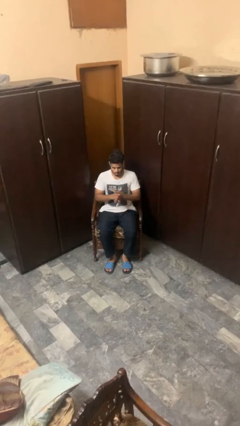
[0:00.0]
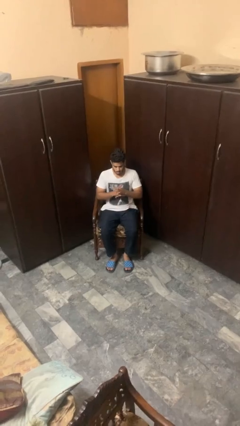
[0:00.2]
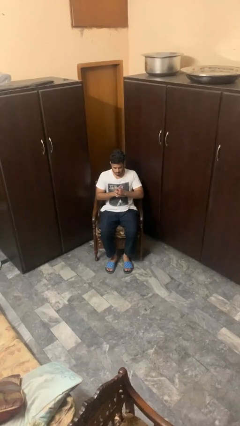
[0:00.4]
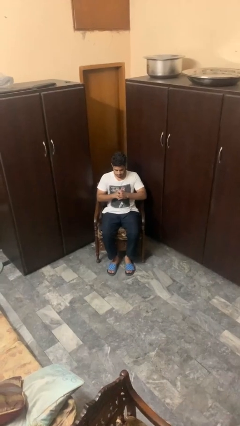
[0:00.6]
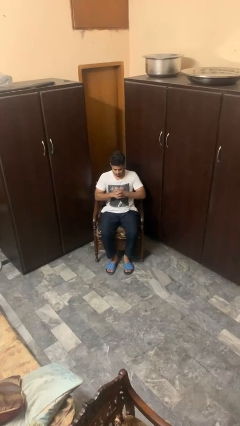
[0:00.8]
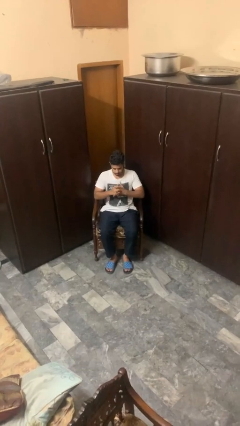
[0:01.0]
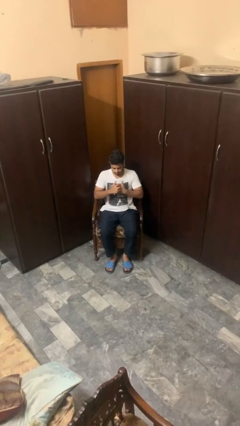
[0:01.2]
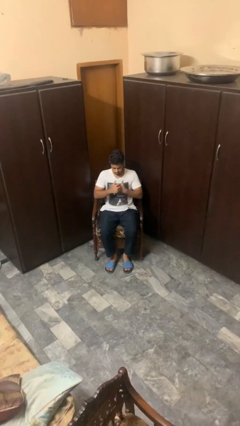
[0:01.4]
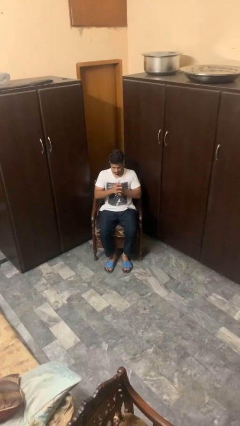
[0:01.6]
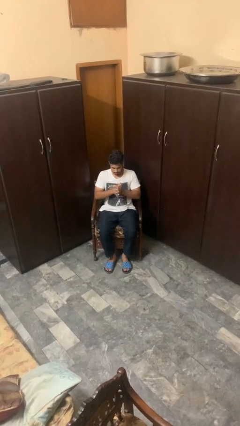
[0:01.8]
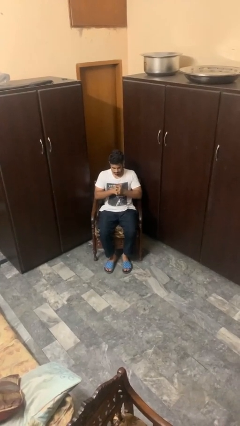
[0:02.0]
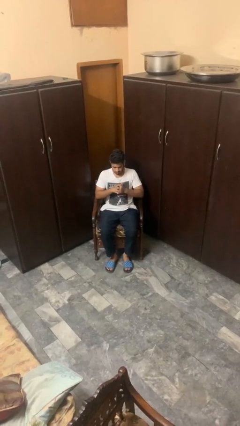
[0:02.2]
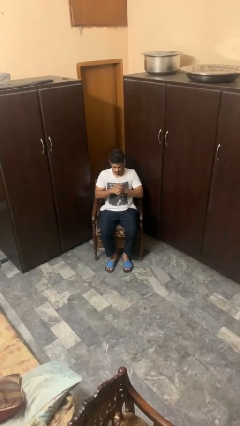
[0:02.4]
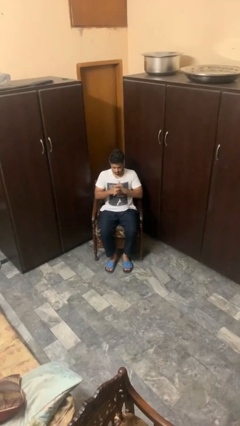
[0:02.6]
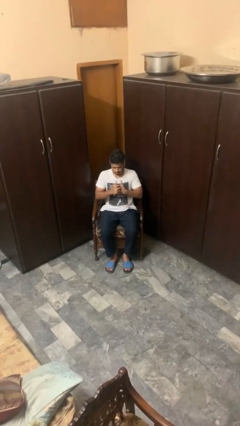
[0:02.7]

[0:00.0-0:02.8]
person cracks knuckles

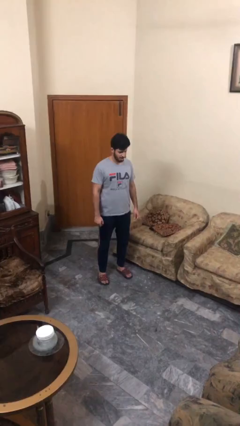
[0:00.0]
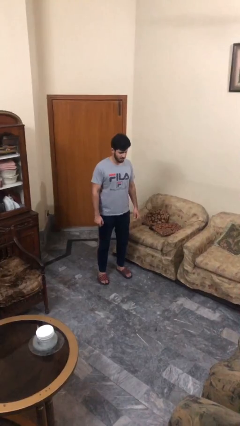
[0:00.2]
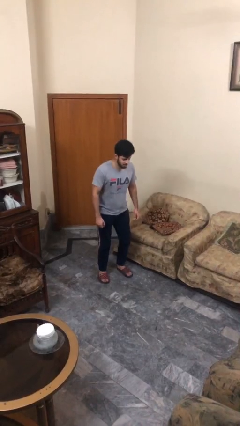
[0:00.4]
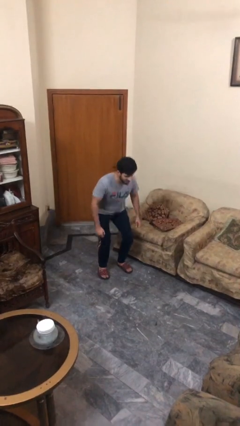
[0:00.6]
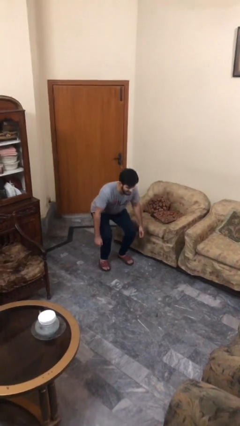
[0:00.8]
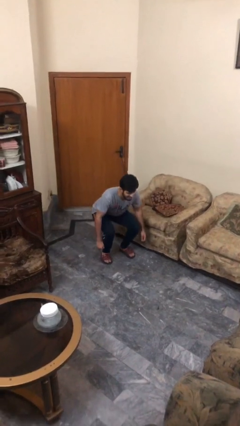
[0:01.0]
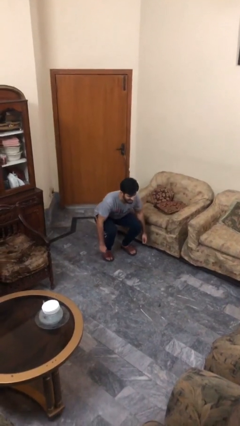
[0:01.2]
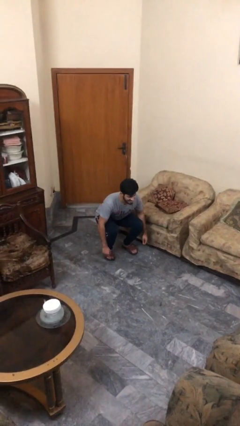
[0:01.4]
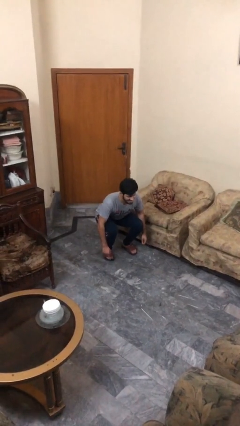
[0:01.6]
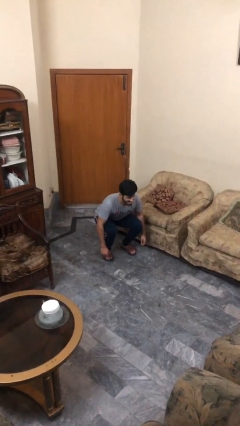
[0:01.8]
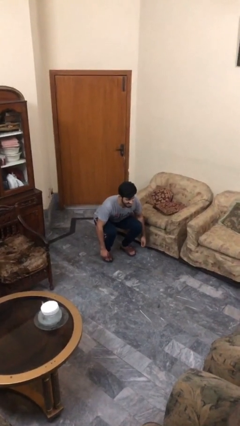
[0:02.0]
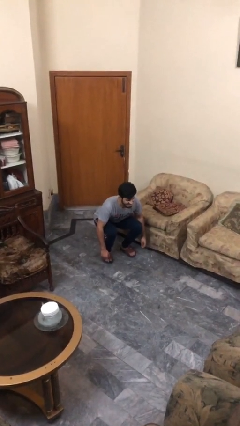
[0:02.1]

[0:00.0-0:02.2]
person squats

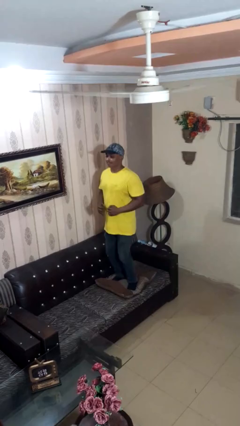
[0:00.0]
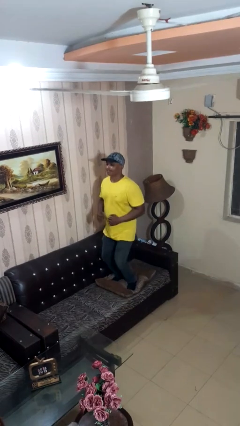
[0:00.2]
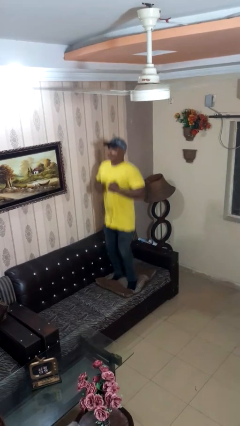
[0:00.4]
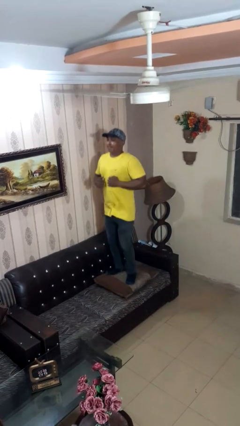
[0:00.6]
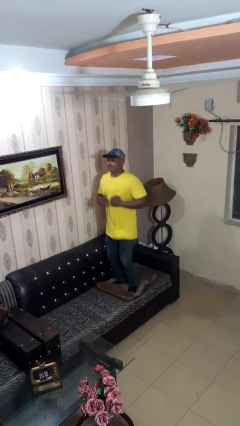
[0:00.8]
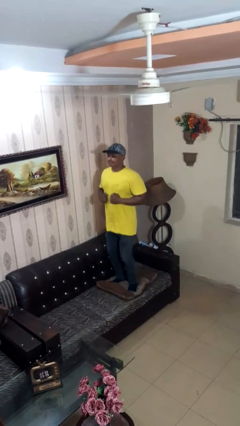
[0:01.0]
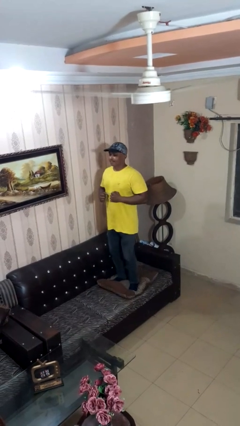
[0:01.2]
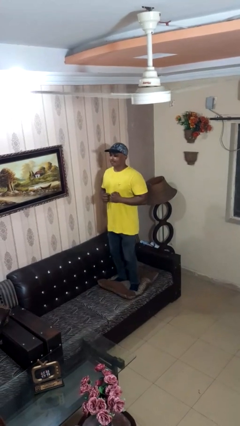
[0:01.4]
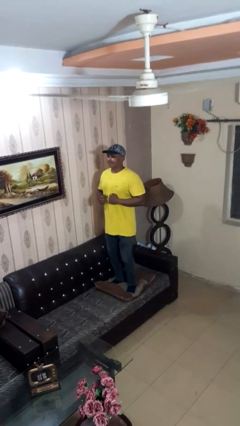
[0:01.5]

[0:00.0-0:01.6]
person jumps on couch

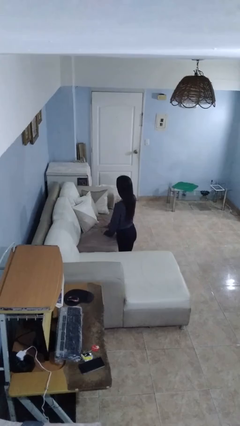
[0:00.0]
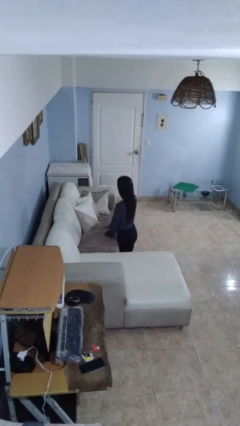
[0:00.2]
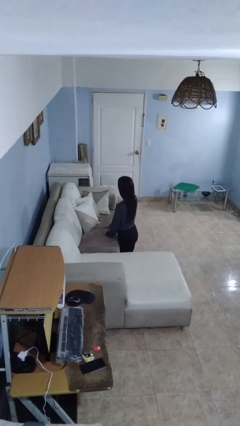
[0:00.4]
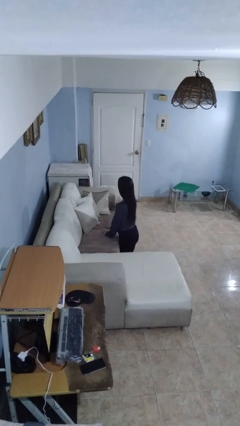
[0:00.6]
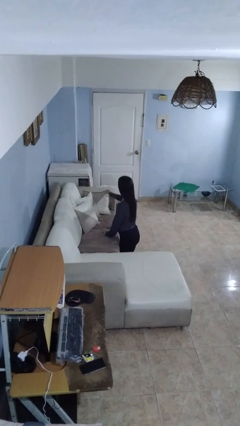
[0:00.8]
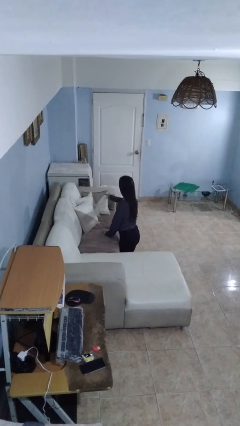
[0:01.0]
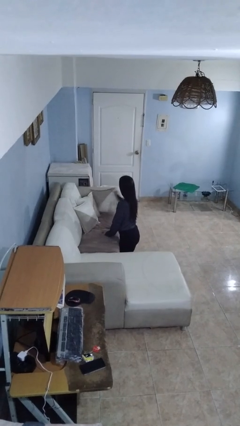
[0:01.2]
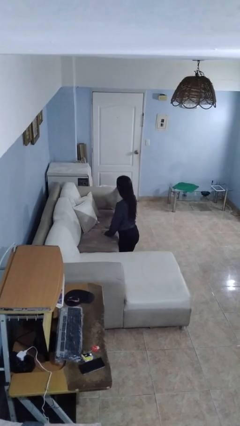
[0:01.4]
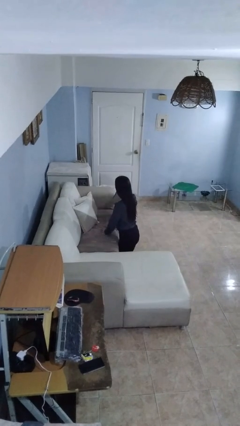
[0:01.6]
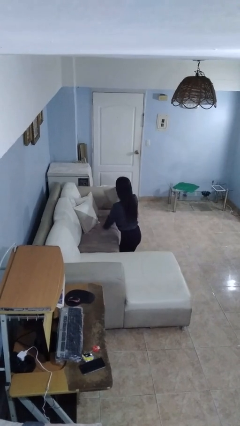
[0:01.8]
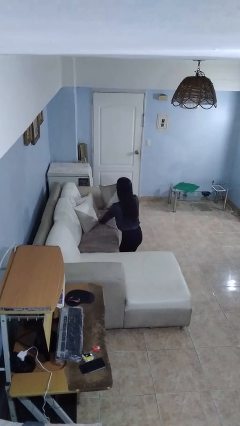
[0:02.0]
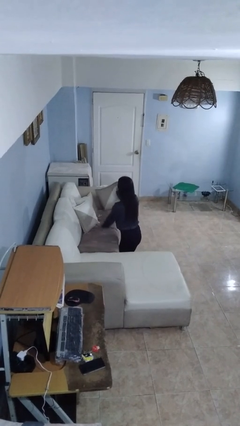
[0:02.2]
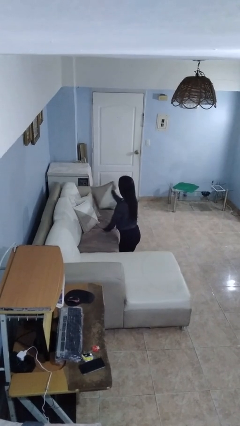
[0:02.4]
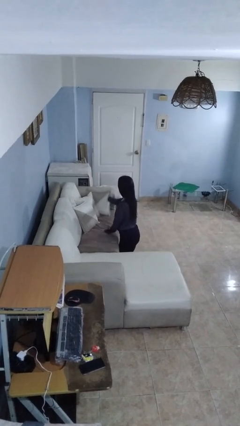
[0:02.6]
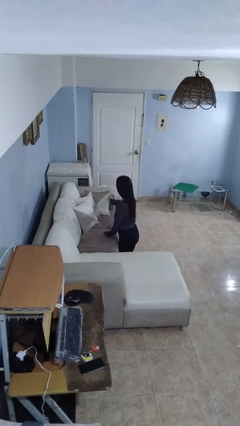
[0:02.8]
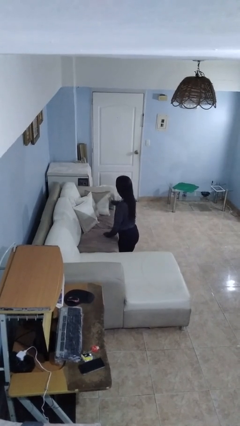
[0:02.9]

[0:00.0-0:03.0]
person searches in couch

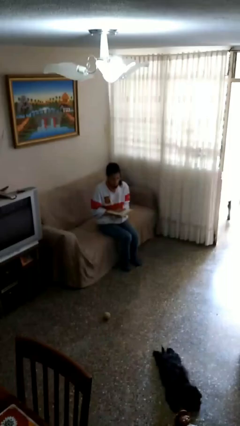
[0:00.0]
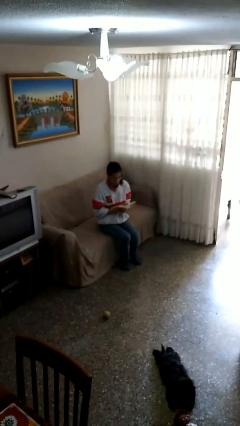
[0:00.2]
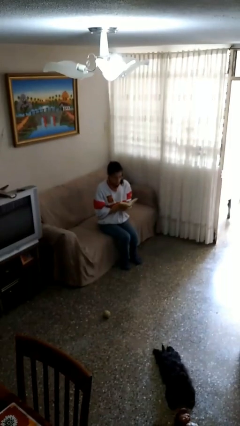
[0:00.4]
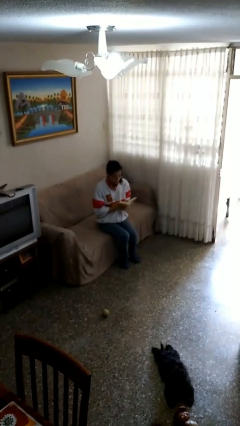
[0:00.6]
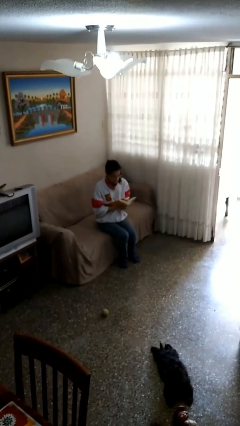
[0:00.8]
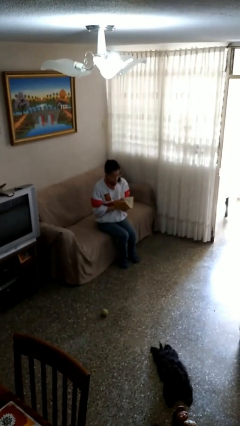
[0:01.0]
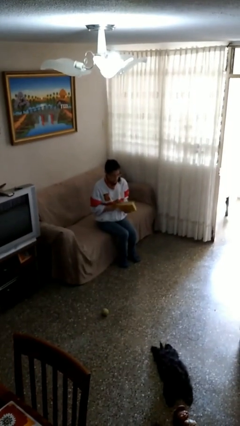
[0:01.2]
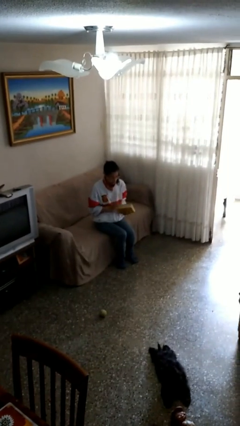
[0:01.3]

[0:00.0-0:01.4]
person reads document

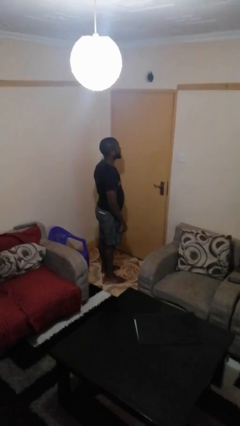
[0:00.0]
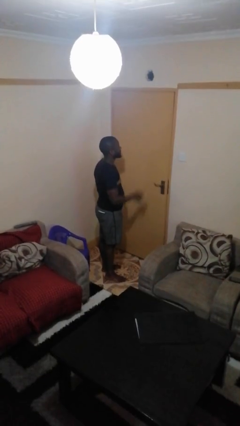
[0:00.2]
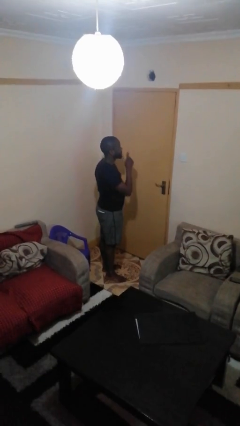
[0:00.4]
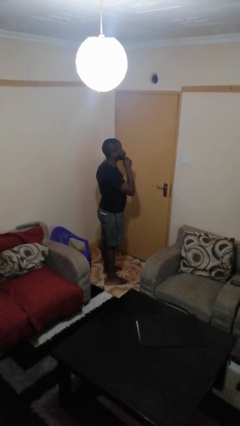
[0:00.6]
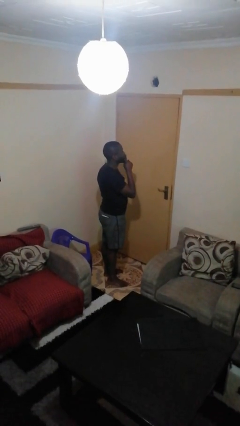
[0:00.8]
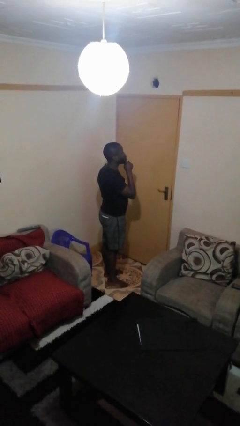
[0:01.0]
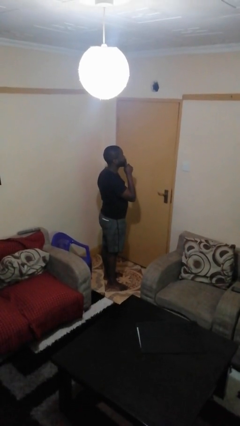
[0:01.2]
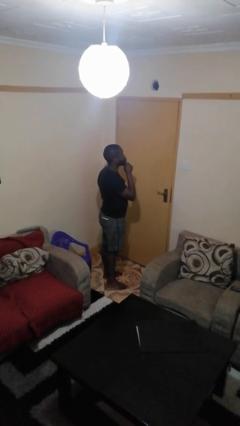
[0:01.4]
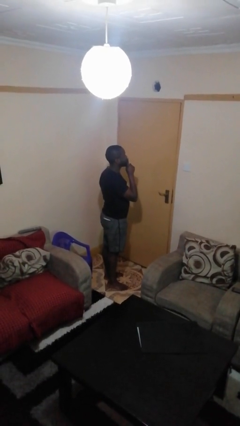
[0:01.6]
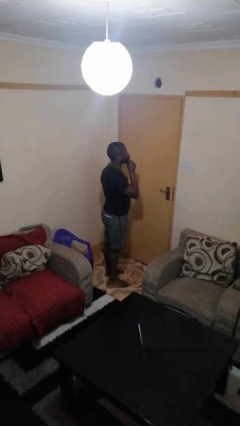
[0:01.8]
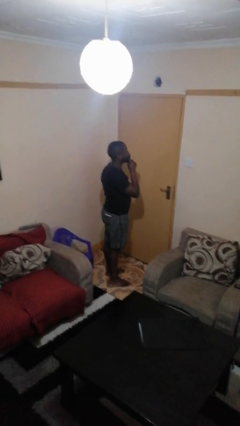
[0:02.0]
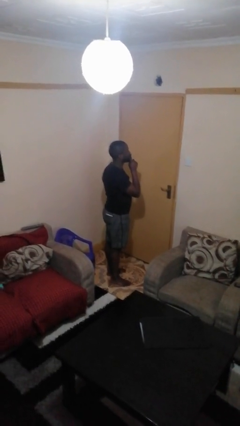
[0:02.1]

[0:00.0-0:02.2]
person gestures be quiet

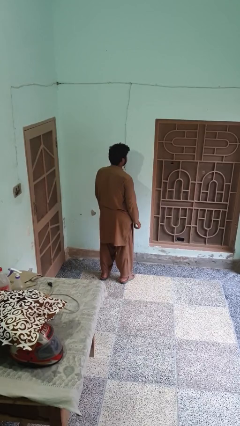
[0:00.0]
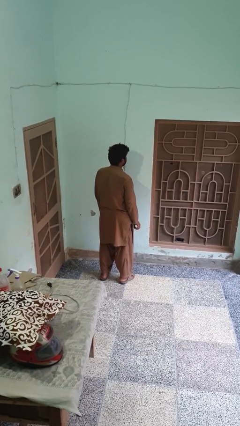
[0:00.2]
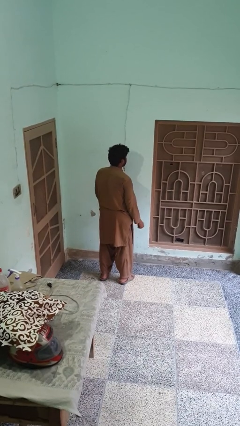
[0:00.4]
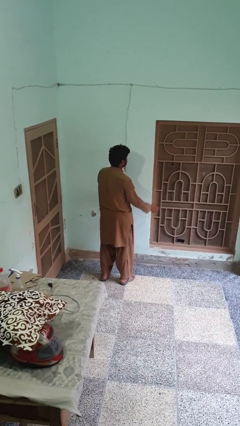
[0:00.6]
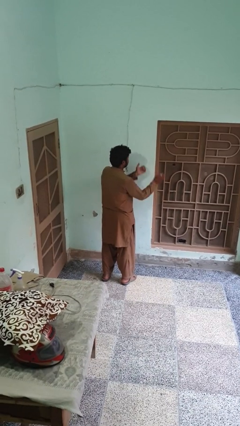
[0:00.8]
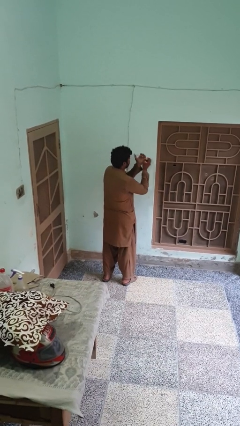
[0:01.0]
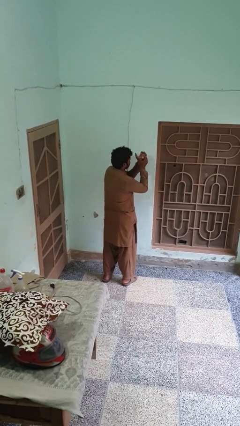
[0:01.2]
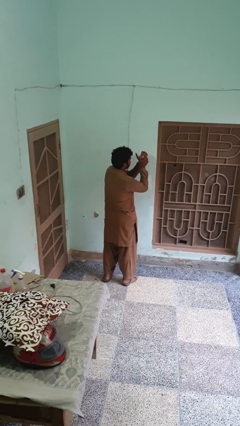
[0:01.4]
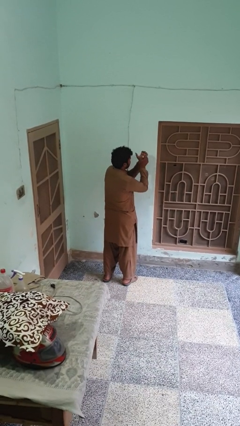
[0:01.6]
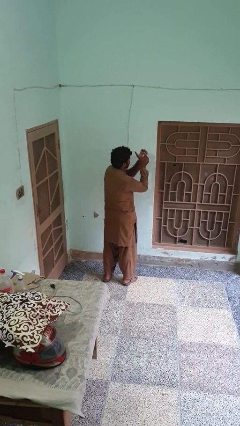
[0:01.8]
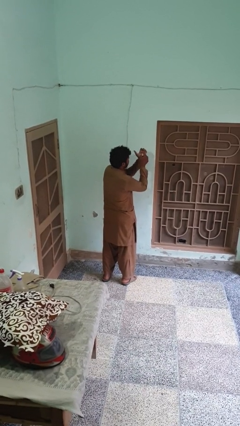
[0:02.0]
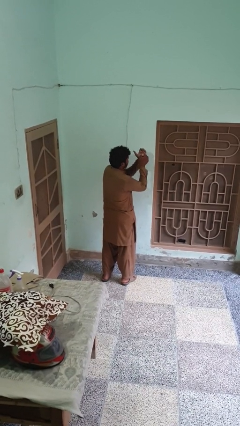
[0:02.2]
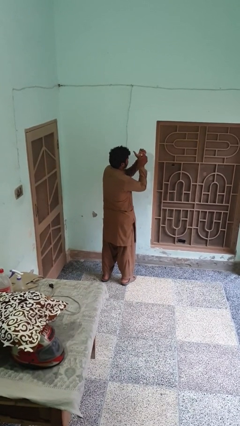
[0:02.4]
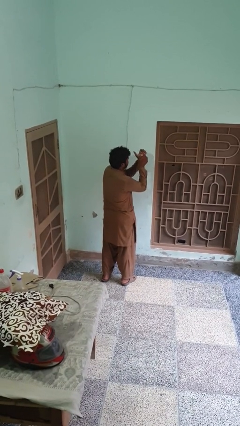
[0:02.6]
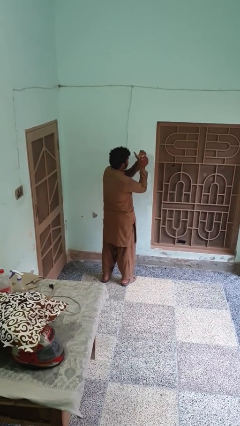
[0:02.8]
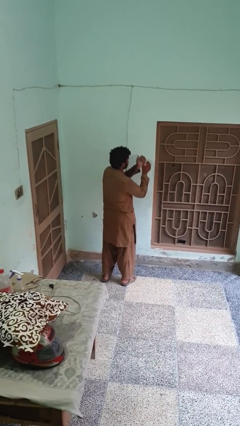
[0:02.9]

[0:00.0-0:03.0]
person paints fingernails

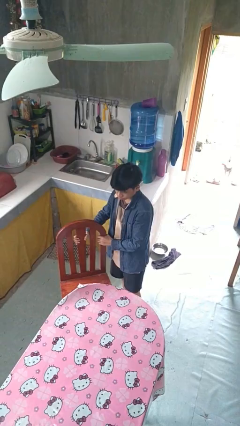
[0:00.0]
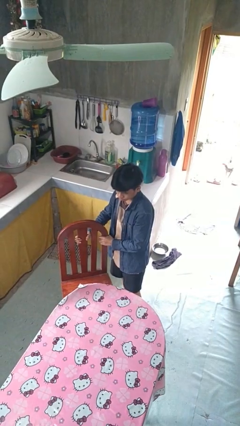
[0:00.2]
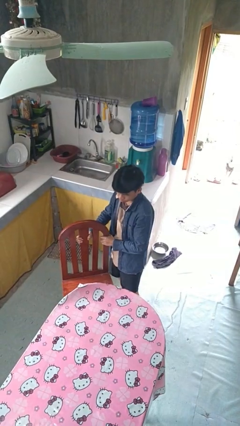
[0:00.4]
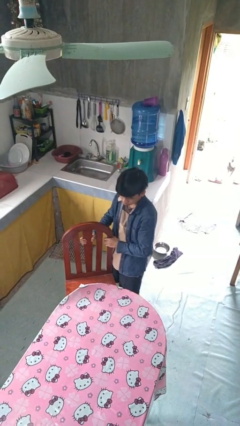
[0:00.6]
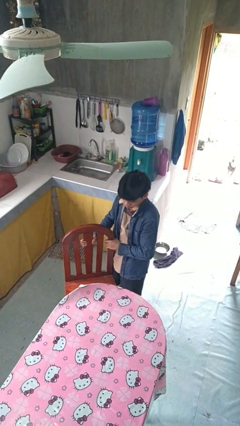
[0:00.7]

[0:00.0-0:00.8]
person pushes in chair
